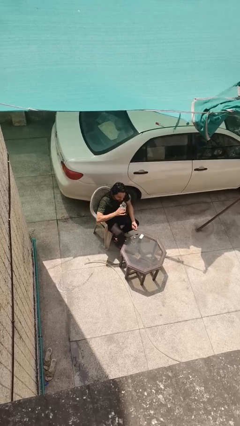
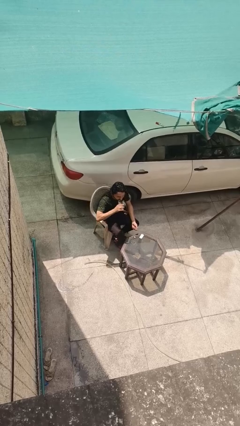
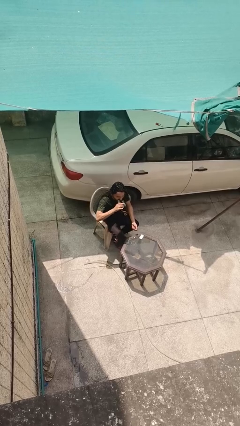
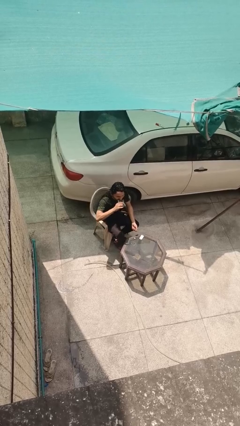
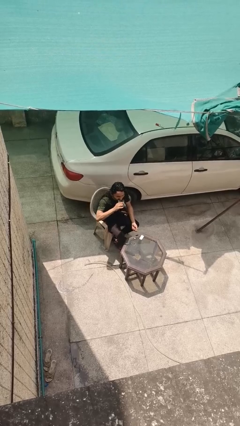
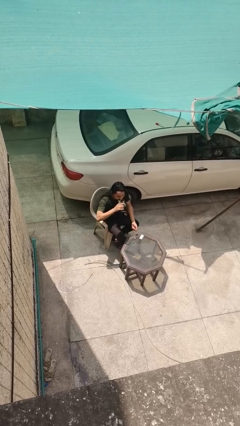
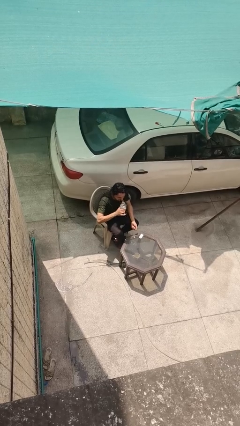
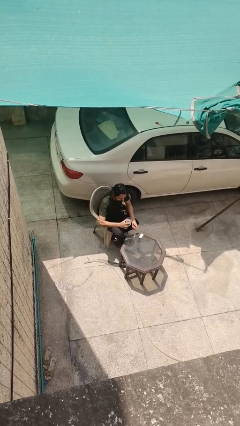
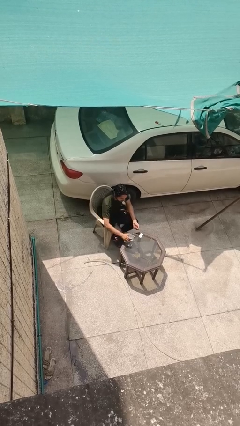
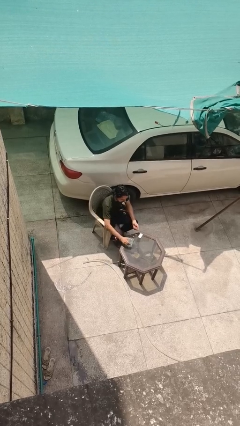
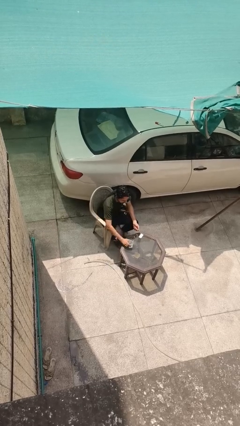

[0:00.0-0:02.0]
person drinks from cup

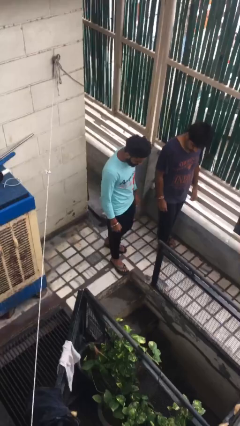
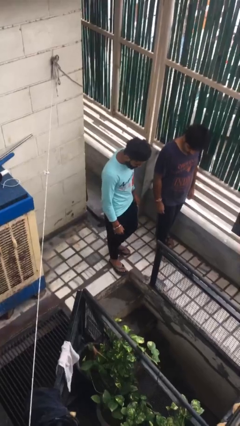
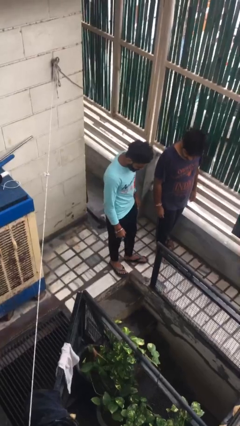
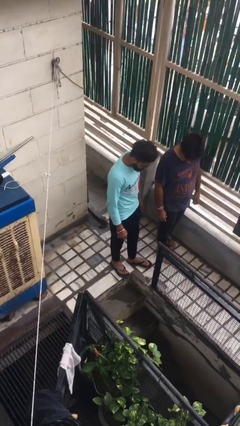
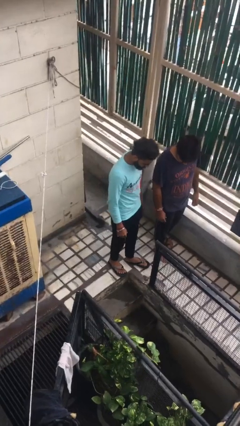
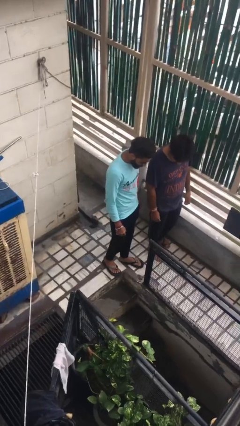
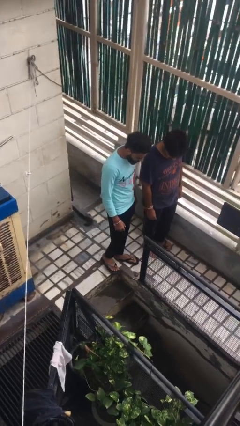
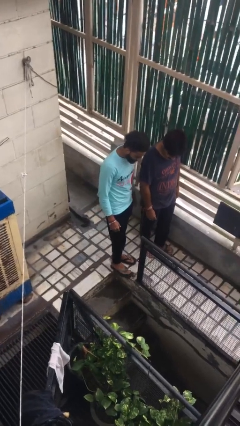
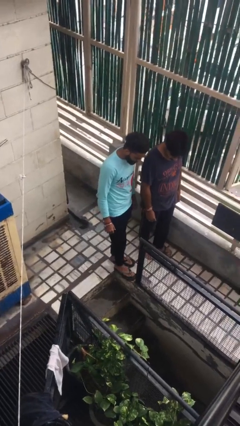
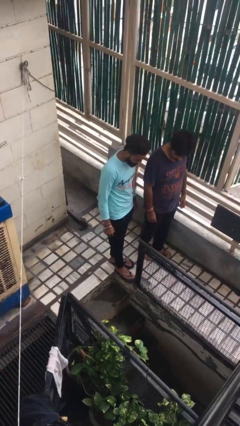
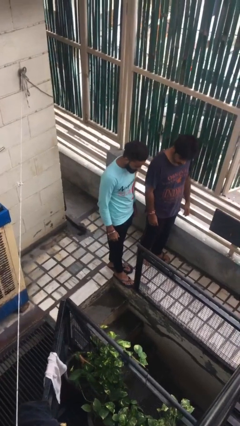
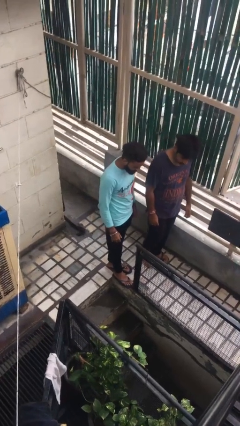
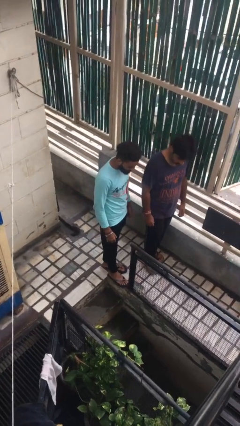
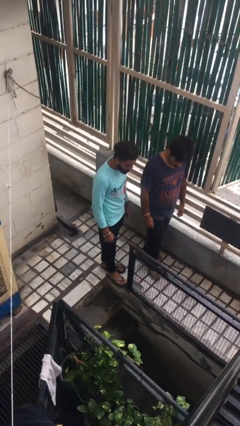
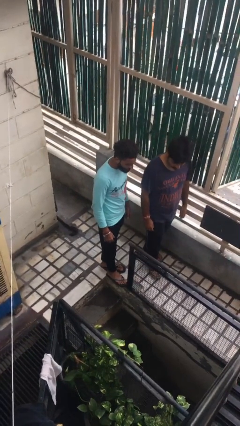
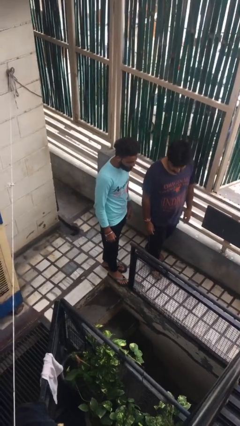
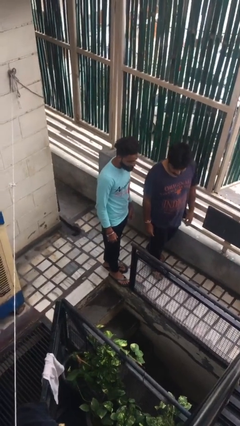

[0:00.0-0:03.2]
person talks to person

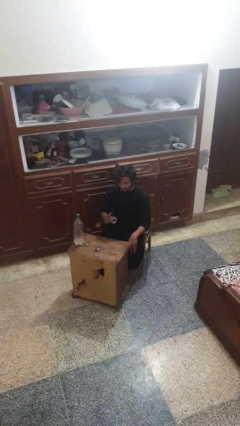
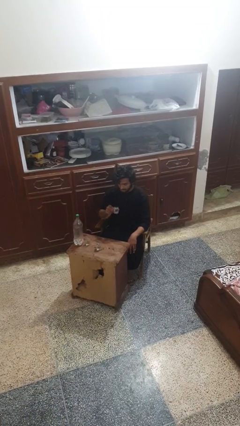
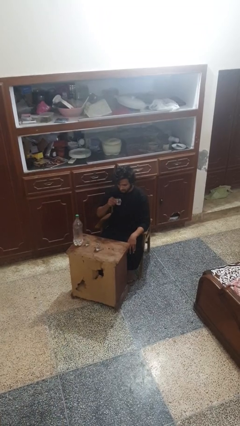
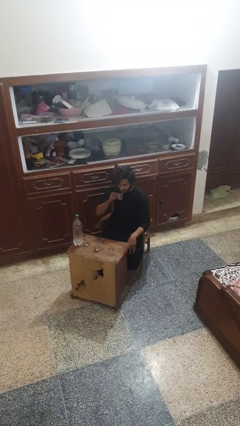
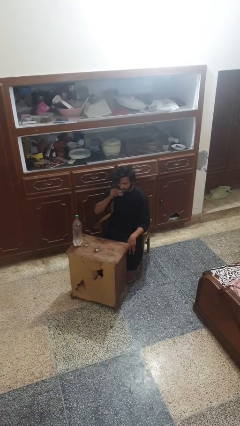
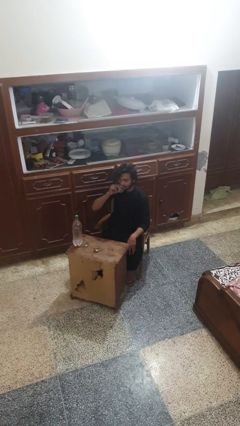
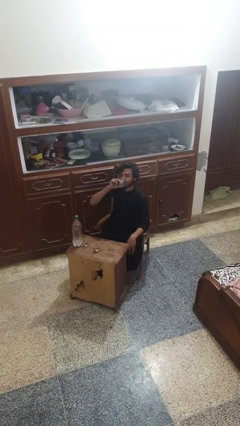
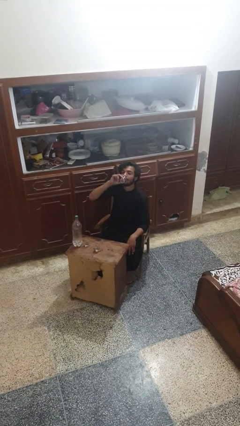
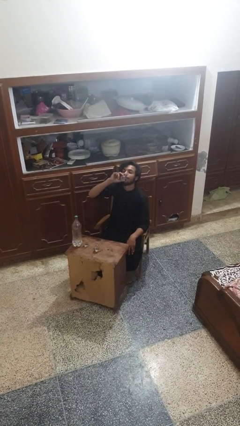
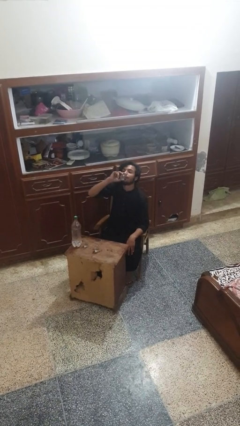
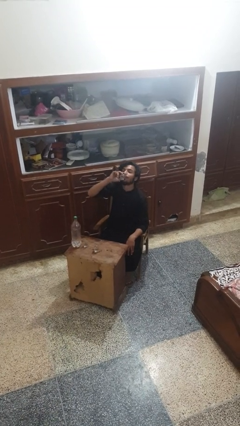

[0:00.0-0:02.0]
person drinks from shotglass

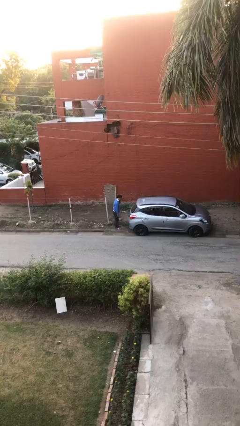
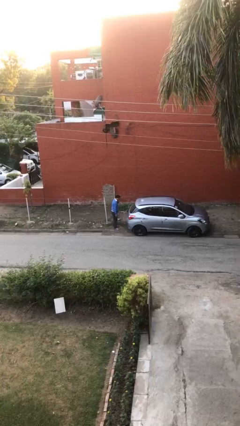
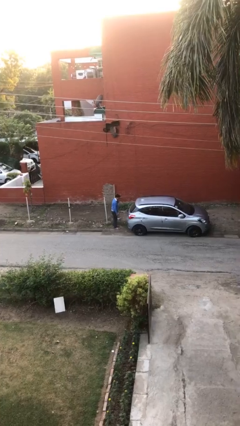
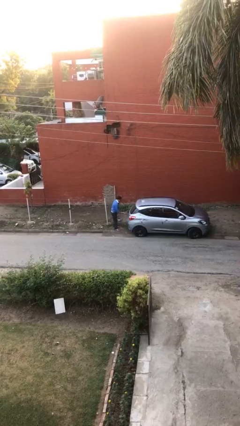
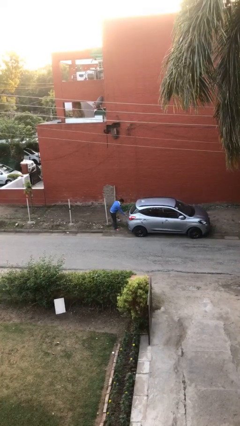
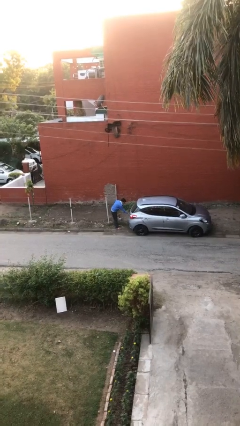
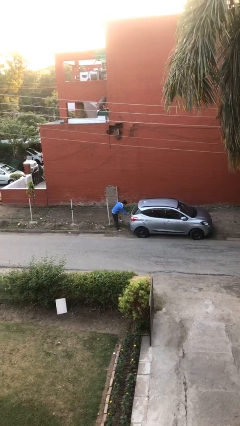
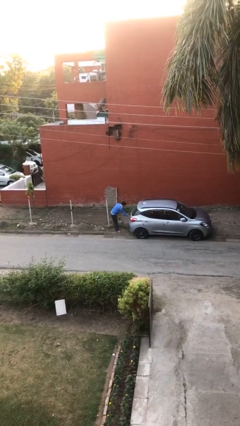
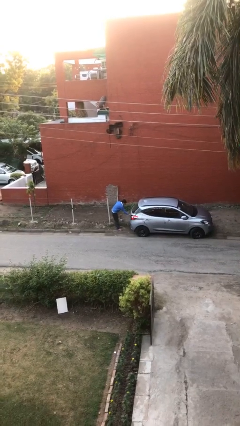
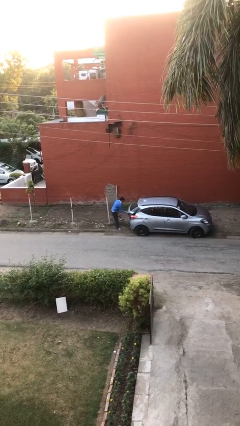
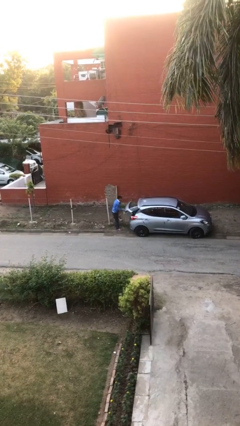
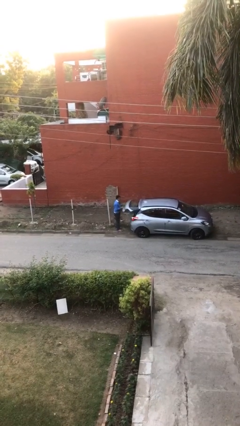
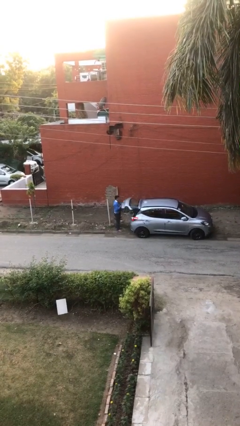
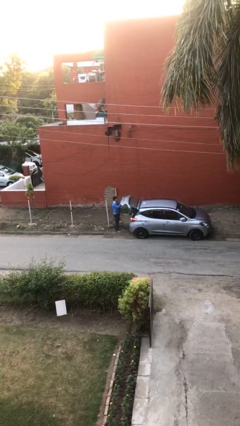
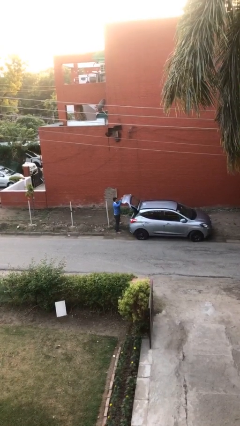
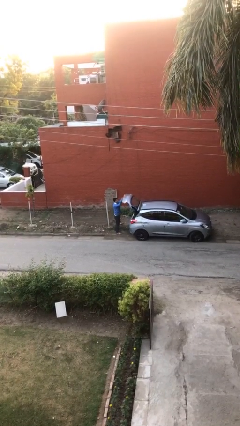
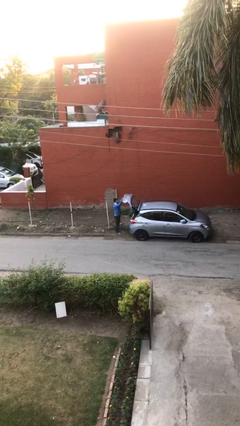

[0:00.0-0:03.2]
person opens car trunk

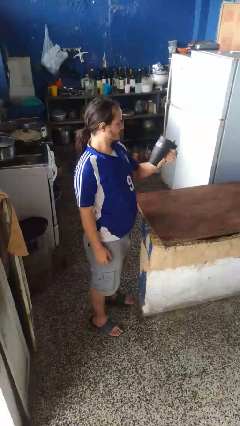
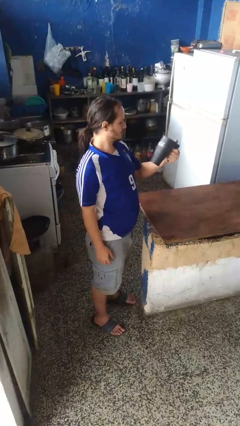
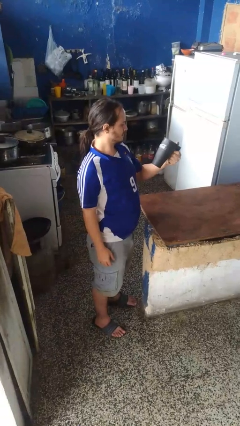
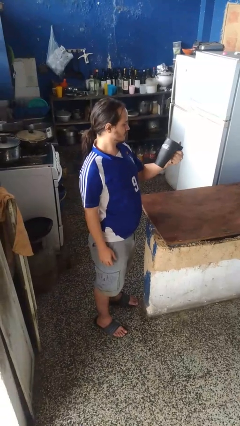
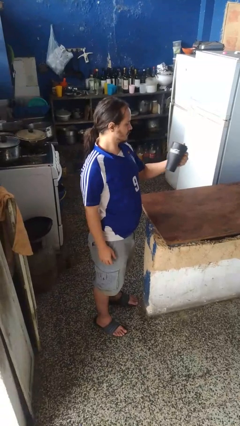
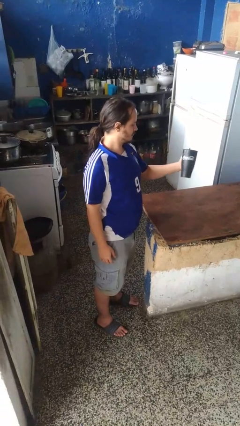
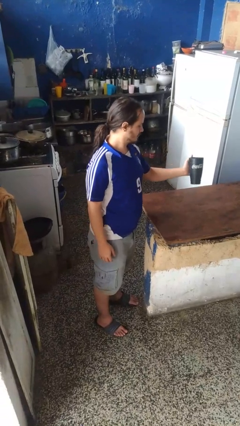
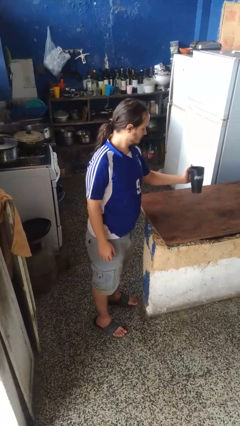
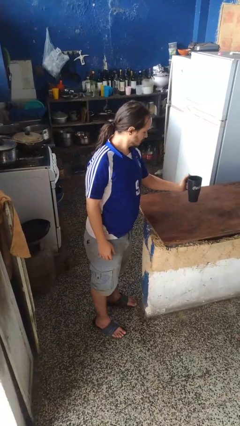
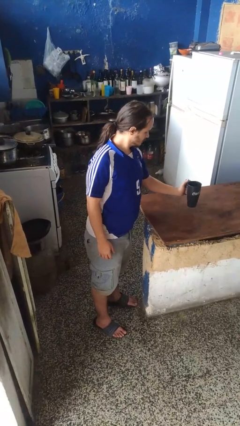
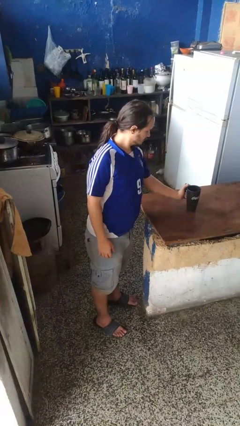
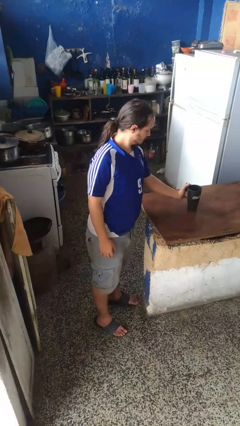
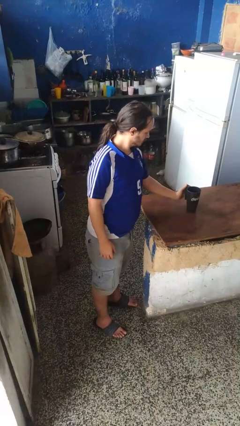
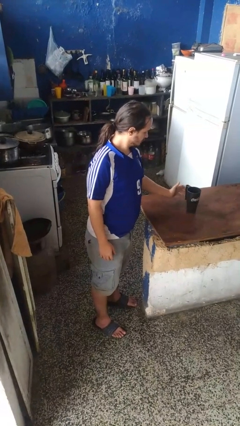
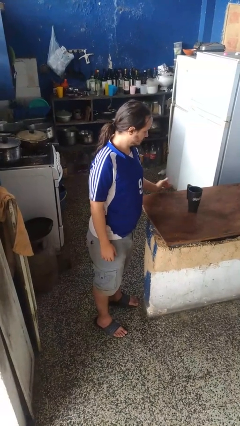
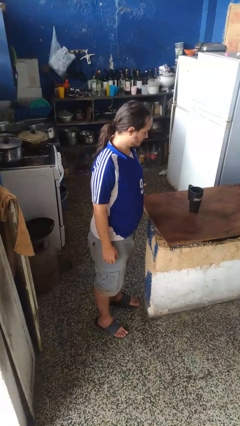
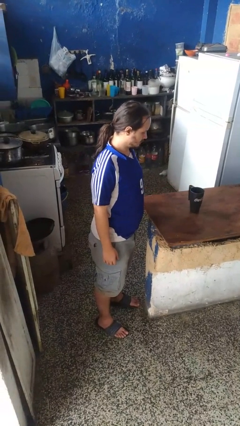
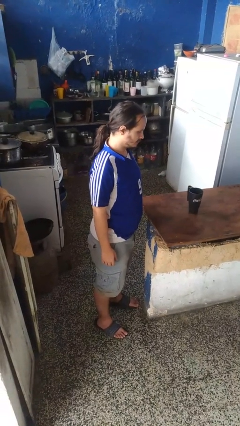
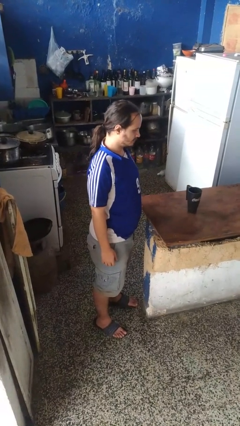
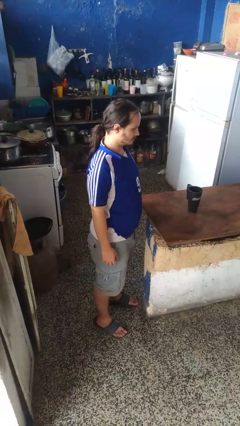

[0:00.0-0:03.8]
person puts down object on countertop

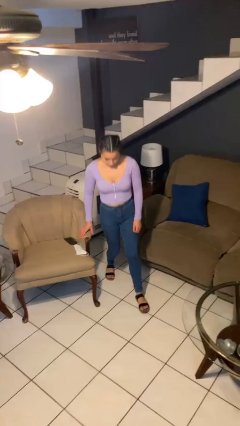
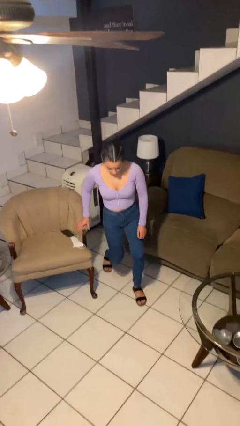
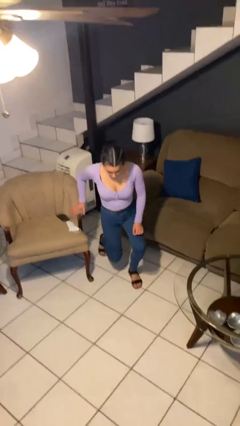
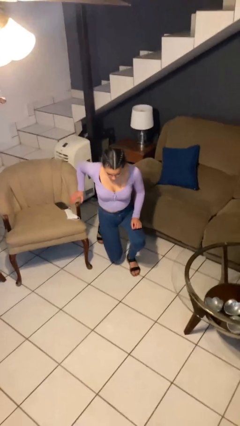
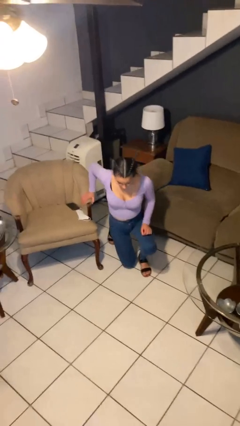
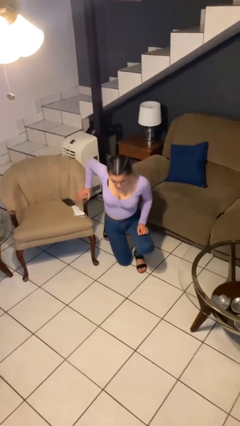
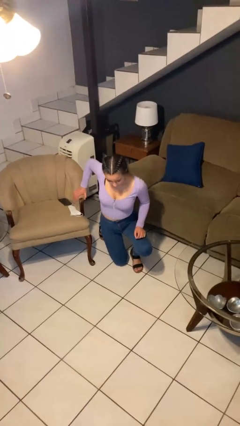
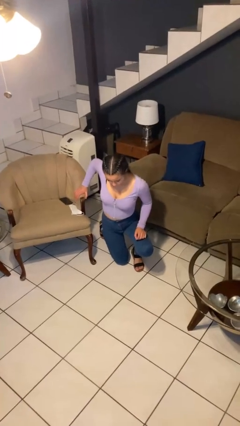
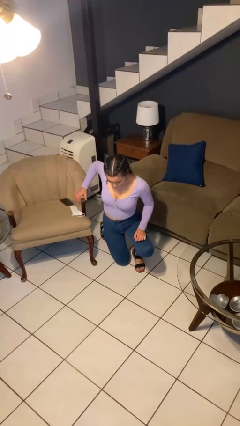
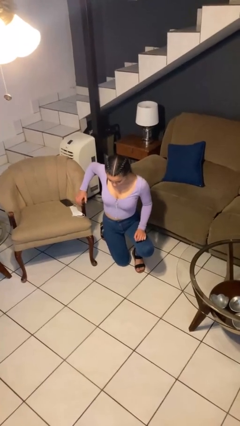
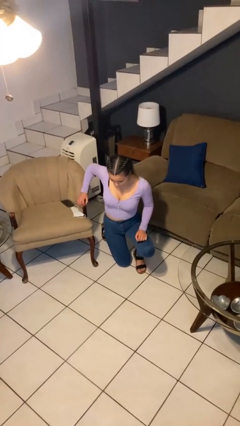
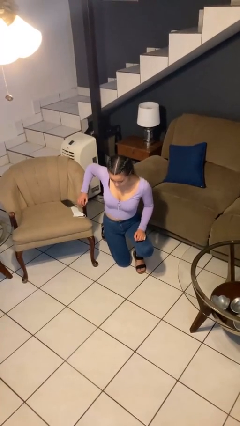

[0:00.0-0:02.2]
person kneels

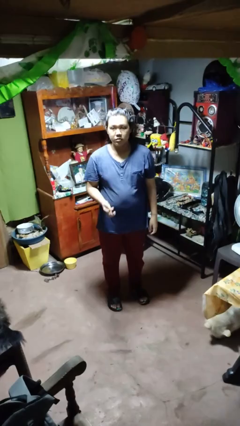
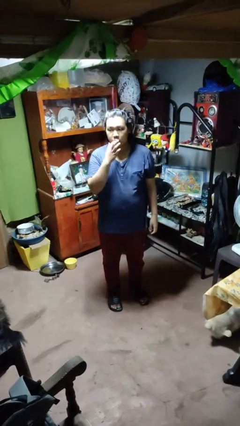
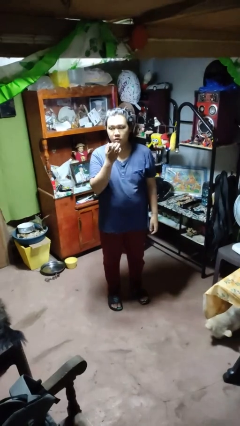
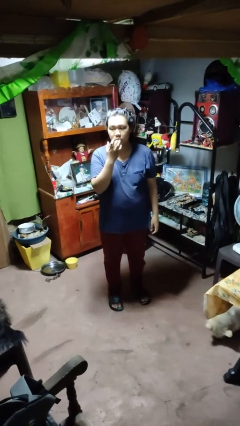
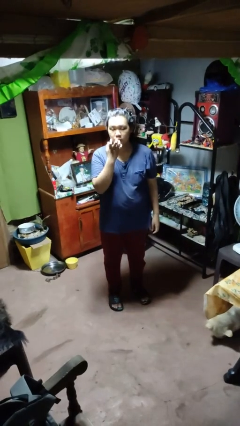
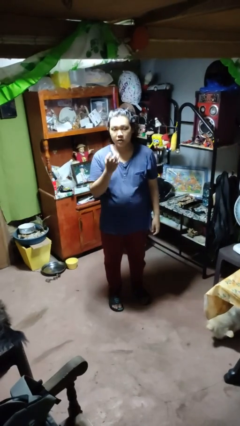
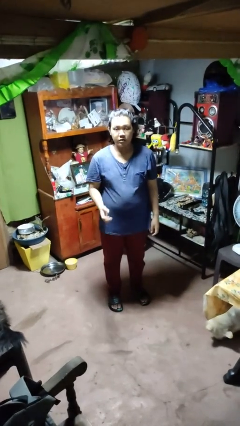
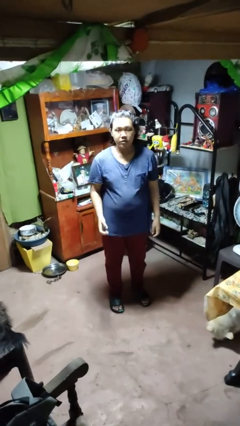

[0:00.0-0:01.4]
person licks fingers
